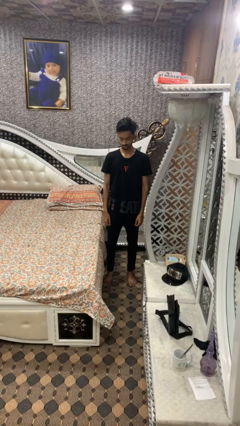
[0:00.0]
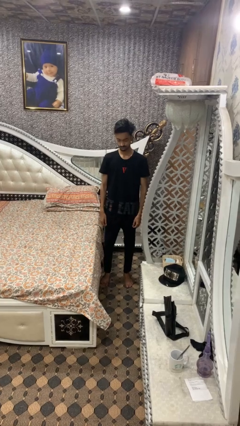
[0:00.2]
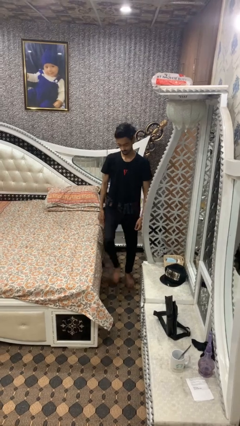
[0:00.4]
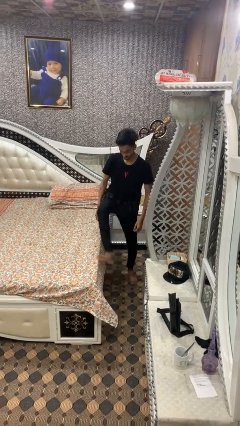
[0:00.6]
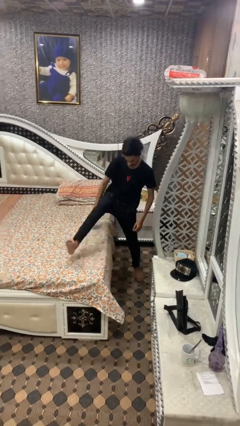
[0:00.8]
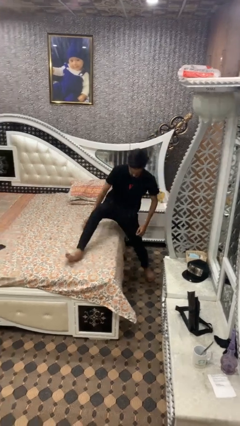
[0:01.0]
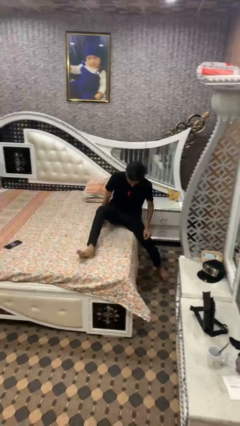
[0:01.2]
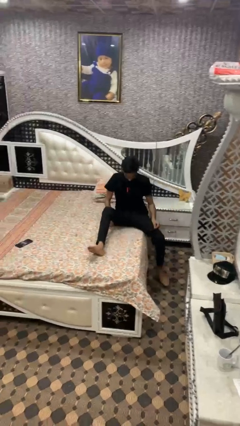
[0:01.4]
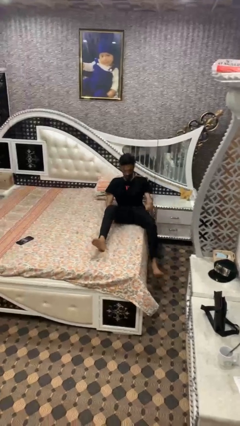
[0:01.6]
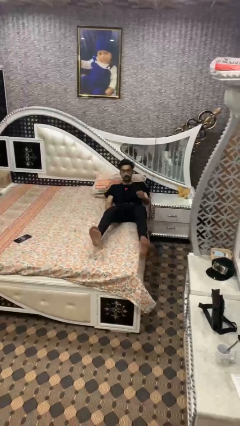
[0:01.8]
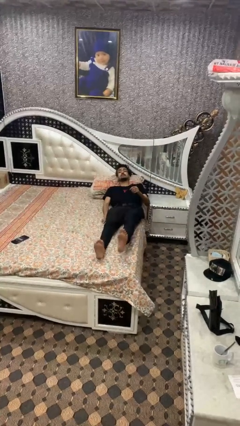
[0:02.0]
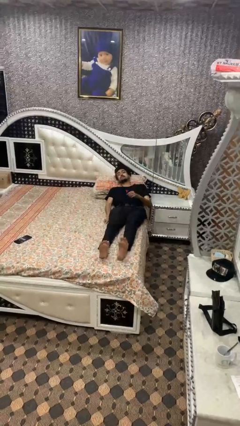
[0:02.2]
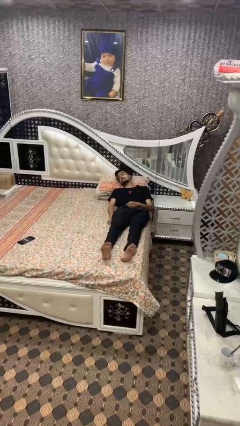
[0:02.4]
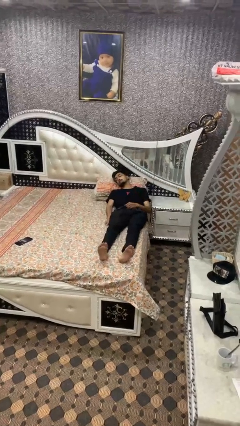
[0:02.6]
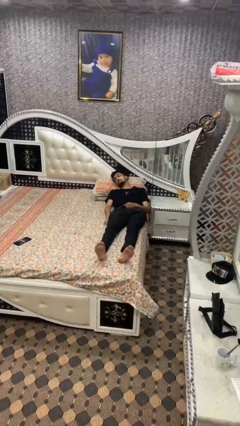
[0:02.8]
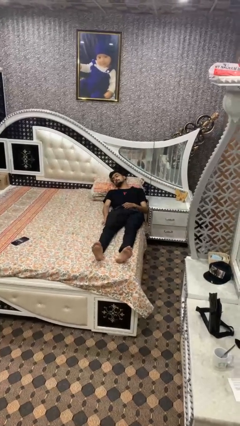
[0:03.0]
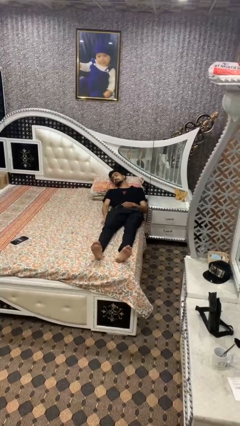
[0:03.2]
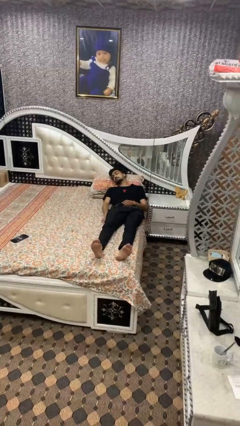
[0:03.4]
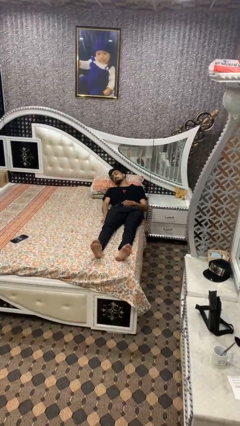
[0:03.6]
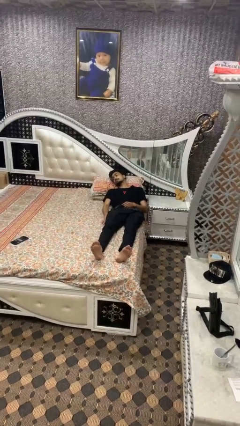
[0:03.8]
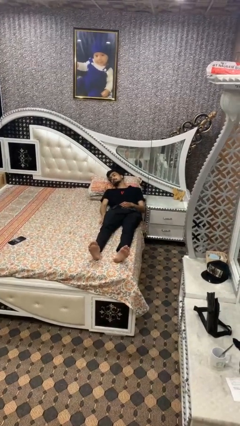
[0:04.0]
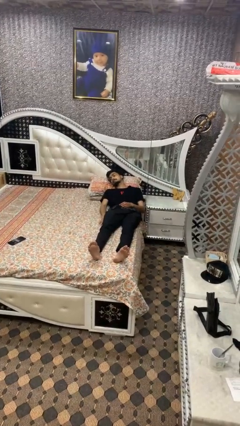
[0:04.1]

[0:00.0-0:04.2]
person lies down on bed

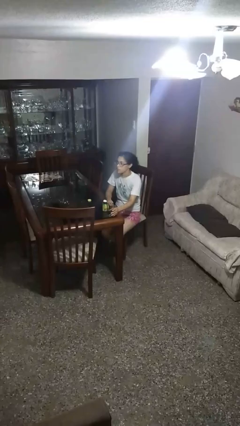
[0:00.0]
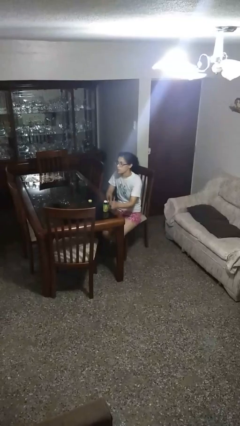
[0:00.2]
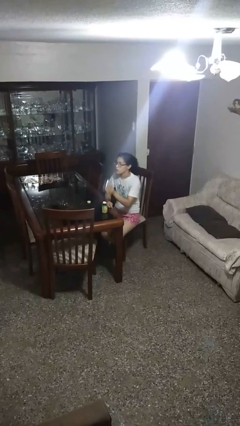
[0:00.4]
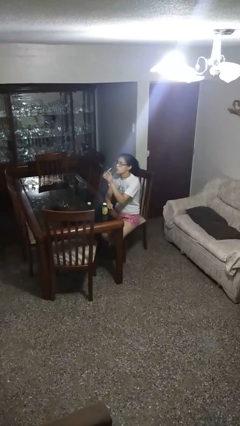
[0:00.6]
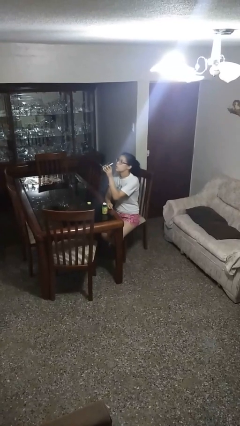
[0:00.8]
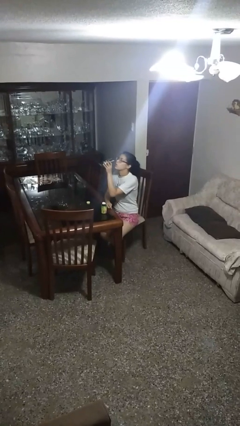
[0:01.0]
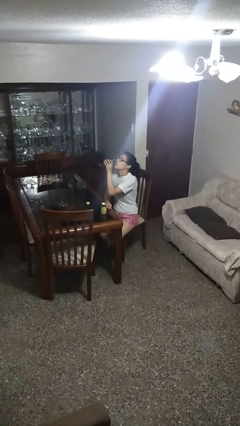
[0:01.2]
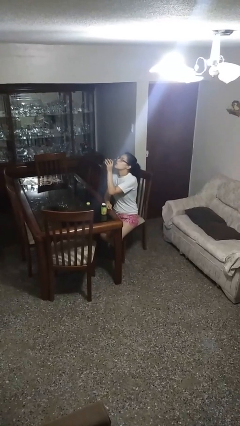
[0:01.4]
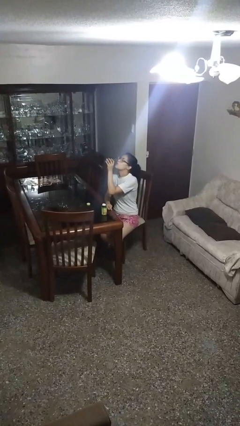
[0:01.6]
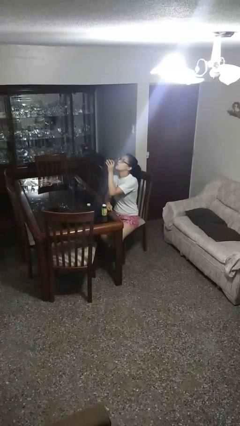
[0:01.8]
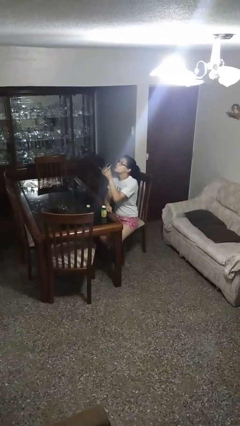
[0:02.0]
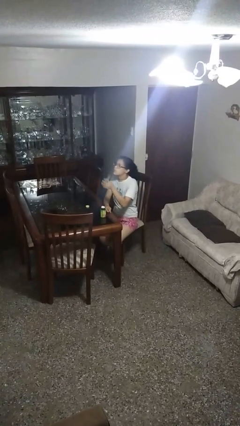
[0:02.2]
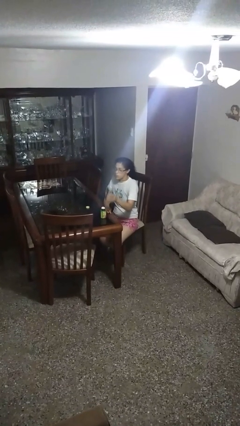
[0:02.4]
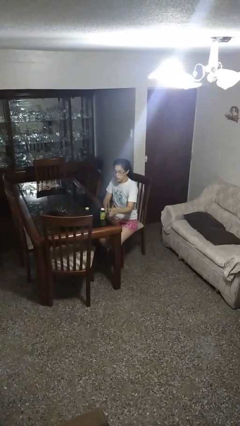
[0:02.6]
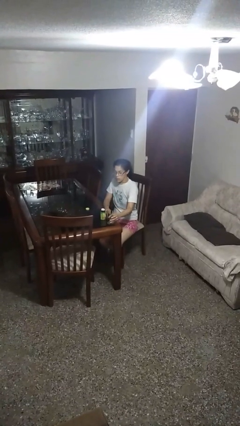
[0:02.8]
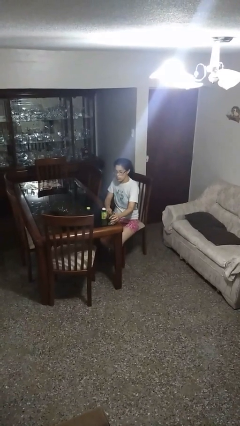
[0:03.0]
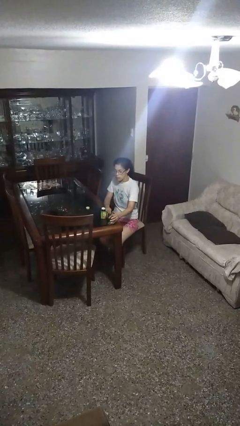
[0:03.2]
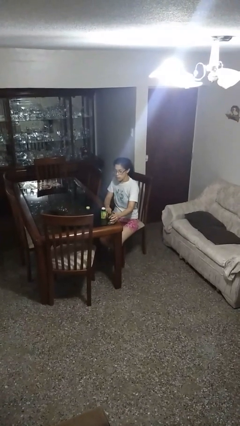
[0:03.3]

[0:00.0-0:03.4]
person drinks from cup

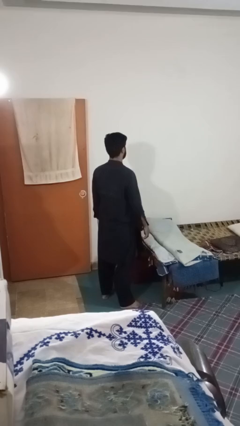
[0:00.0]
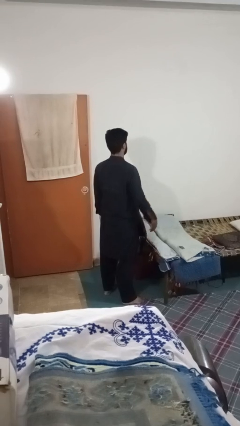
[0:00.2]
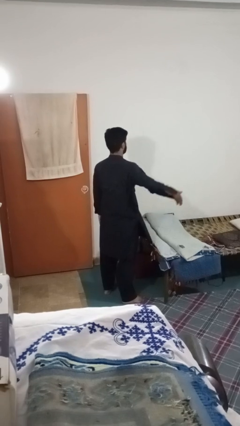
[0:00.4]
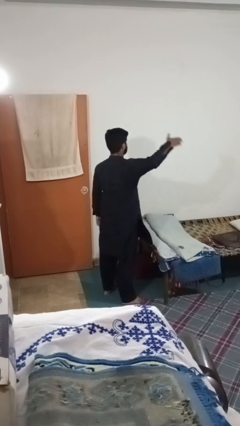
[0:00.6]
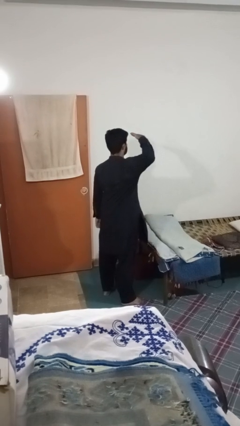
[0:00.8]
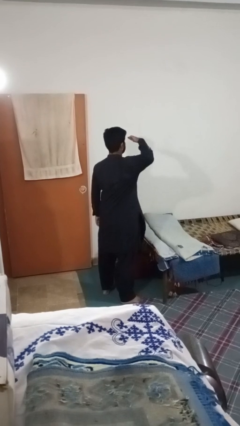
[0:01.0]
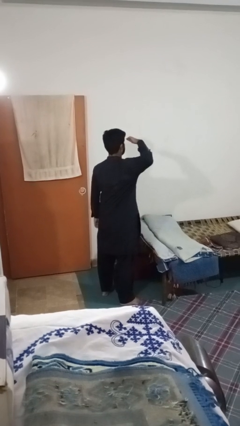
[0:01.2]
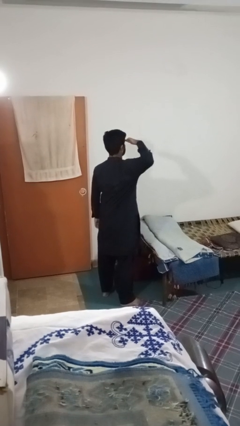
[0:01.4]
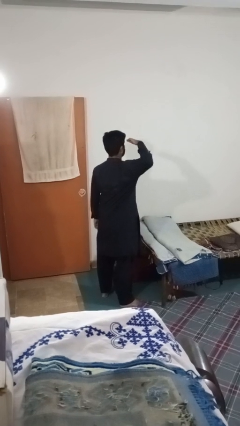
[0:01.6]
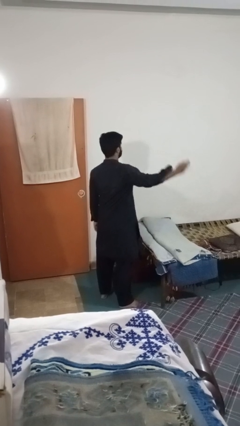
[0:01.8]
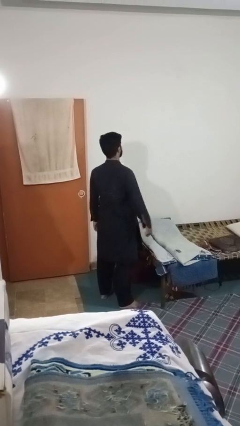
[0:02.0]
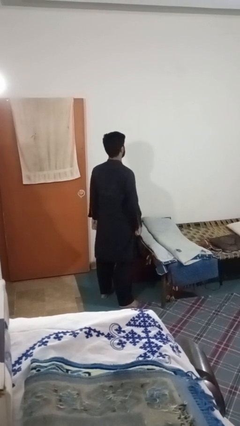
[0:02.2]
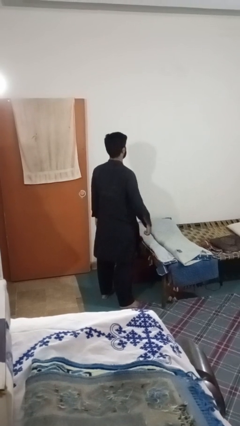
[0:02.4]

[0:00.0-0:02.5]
person salutes

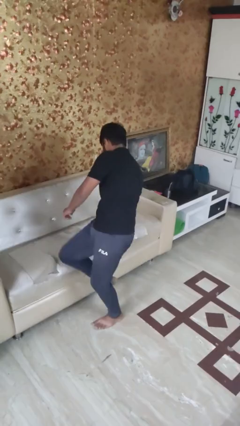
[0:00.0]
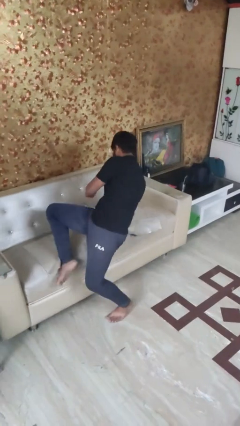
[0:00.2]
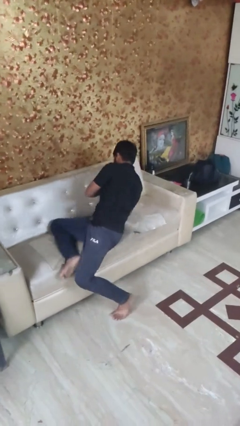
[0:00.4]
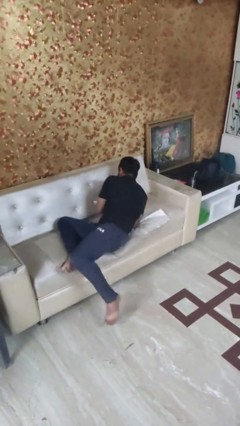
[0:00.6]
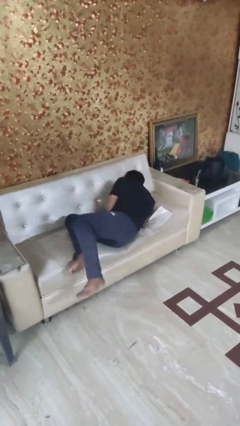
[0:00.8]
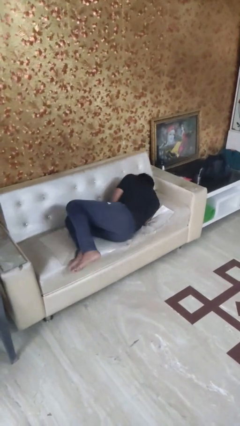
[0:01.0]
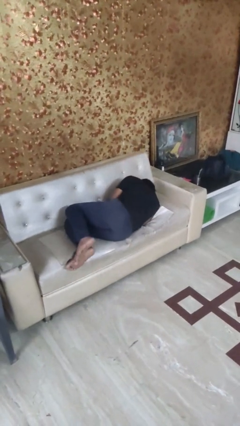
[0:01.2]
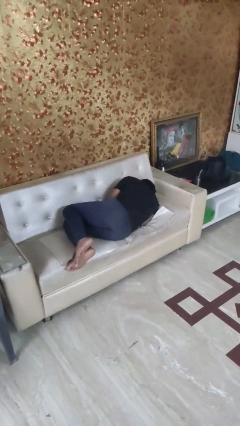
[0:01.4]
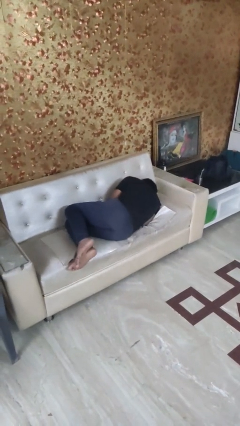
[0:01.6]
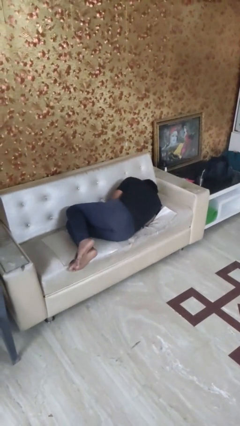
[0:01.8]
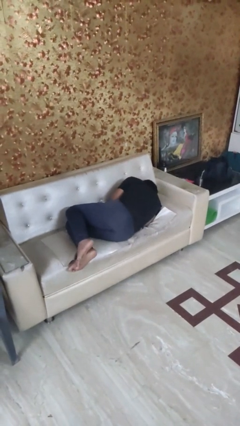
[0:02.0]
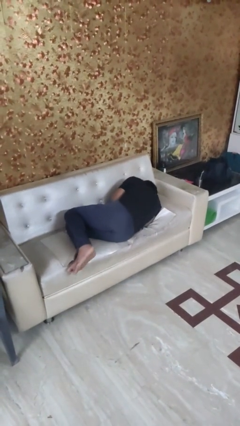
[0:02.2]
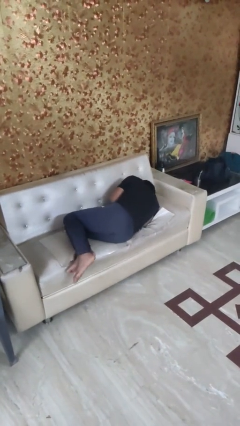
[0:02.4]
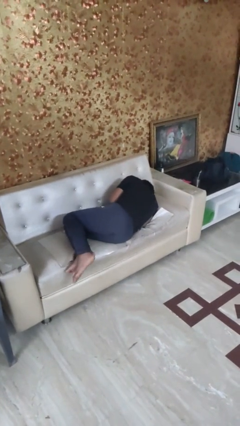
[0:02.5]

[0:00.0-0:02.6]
person lies down on couch

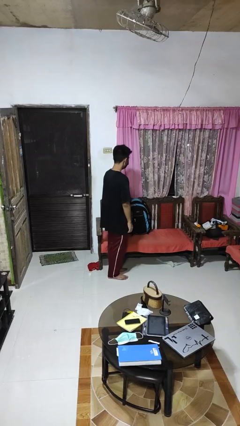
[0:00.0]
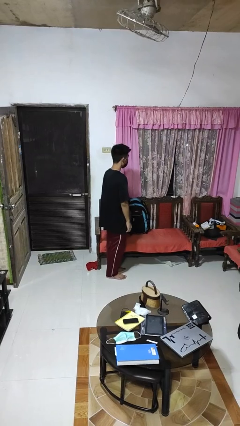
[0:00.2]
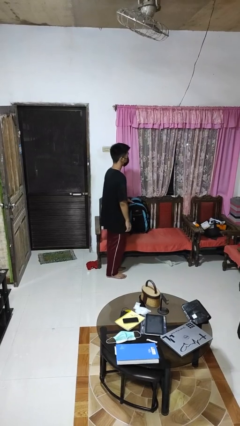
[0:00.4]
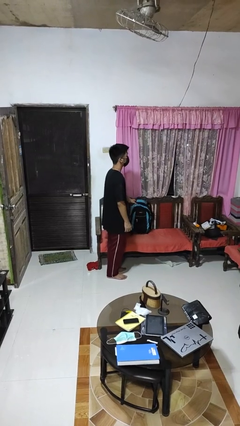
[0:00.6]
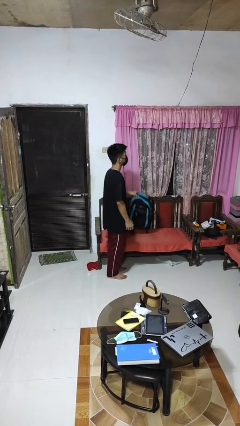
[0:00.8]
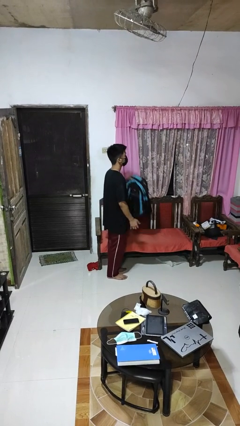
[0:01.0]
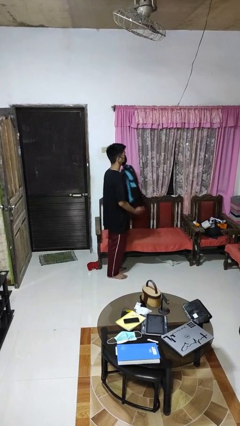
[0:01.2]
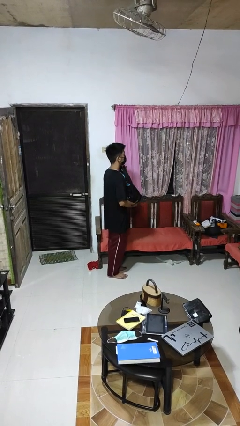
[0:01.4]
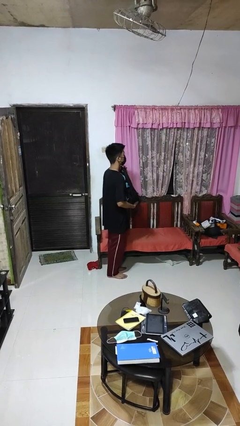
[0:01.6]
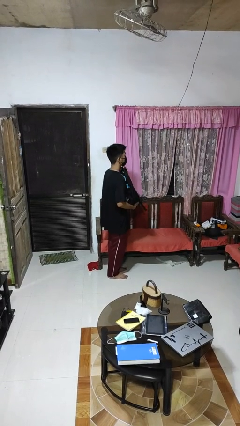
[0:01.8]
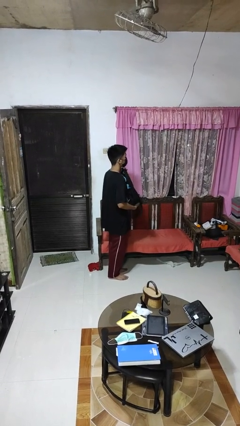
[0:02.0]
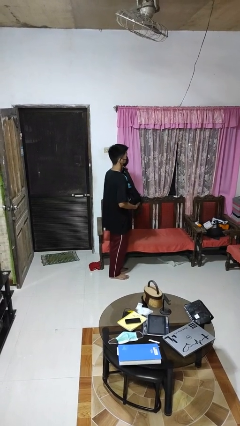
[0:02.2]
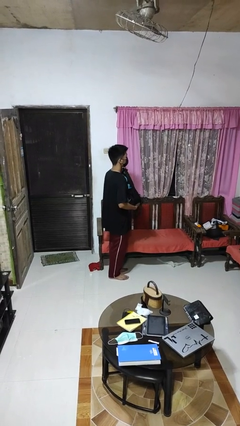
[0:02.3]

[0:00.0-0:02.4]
person picks up object from couch

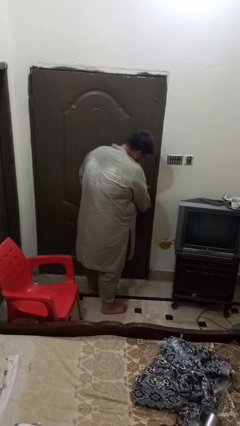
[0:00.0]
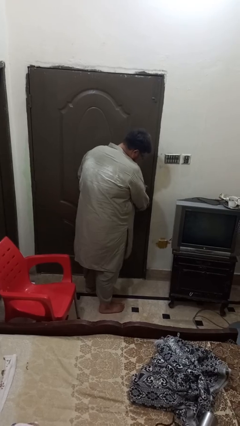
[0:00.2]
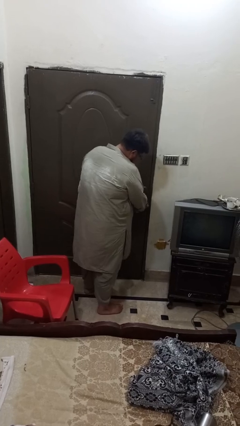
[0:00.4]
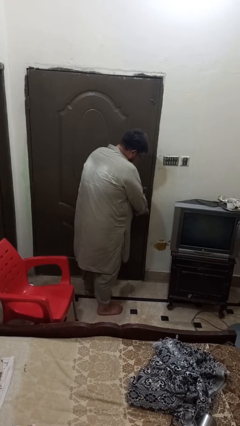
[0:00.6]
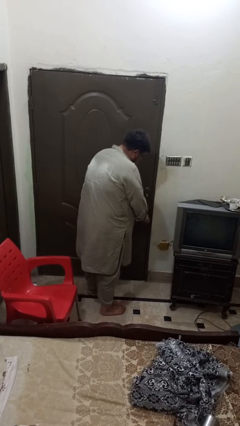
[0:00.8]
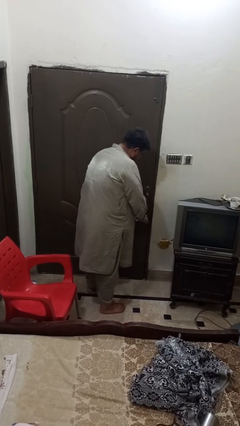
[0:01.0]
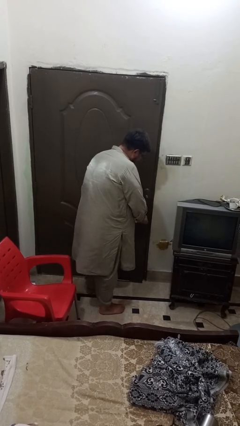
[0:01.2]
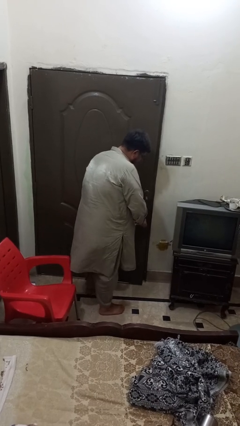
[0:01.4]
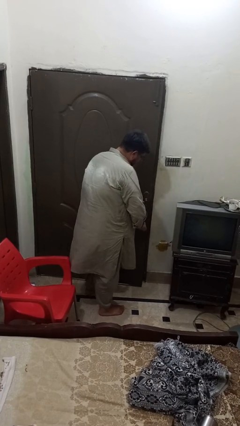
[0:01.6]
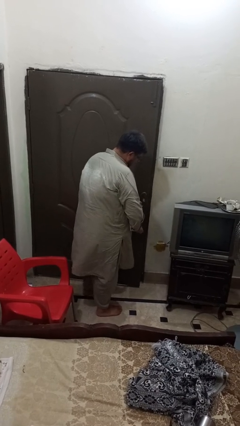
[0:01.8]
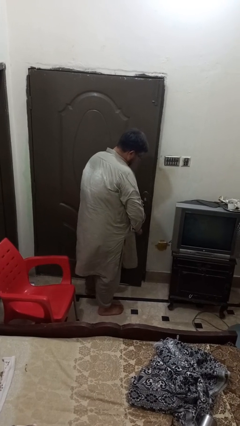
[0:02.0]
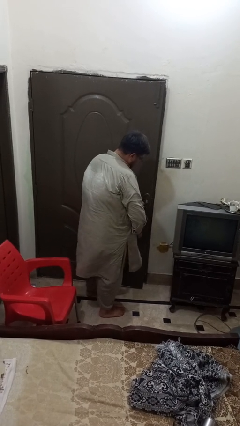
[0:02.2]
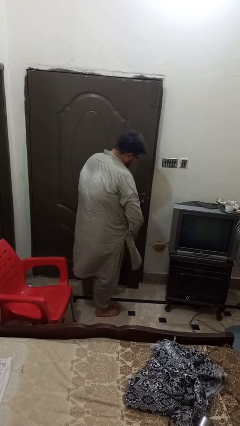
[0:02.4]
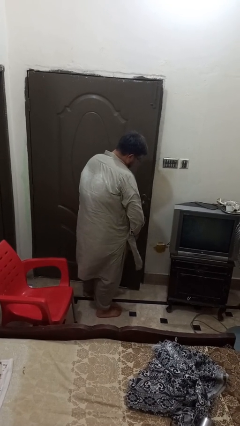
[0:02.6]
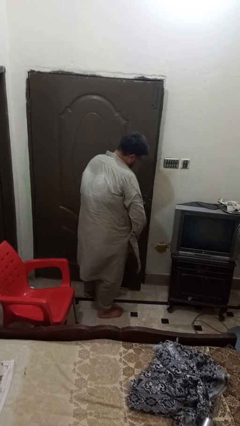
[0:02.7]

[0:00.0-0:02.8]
person opens facility door
